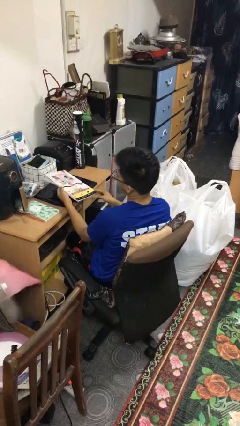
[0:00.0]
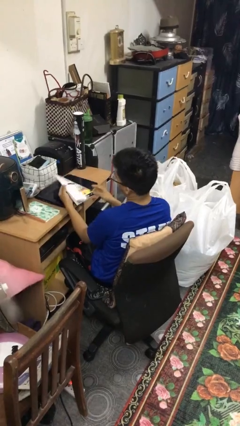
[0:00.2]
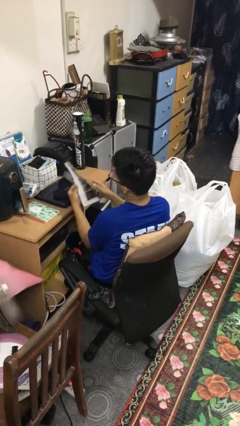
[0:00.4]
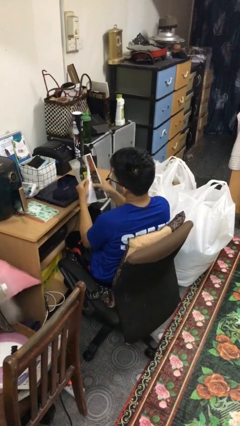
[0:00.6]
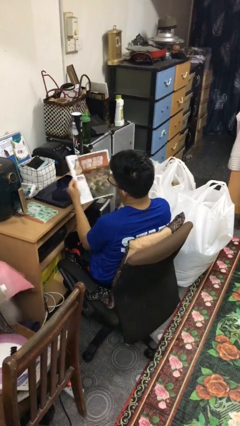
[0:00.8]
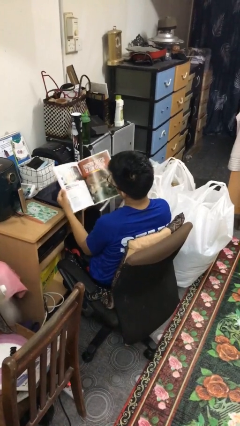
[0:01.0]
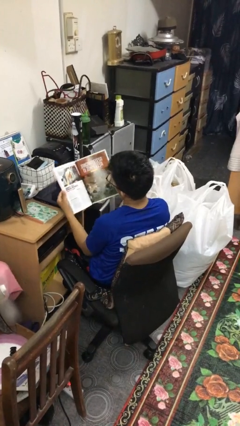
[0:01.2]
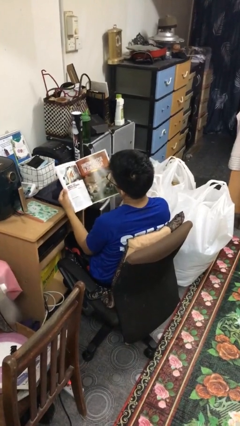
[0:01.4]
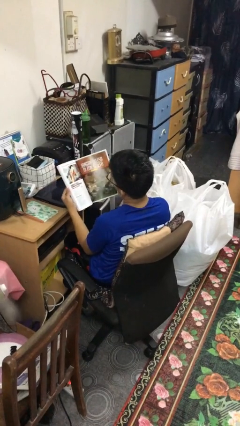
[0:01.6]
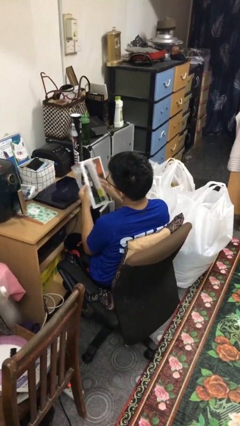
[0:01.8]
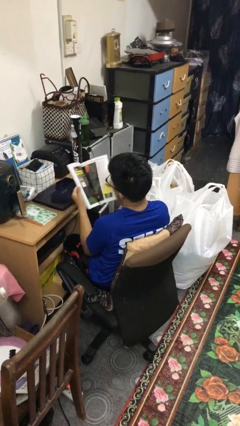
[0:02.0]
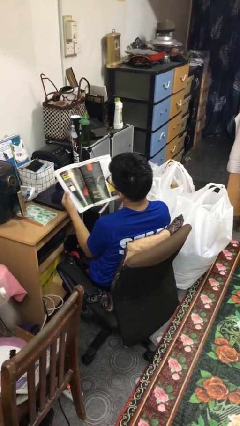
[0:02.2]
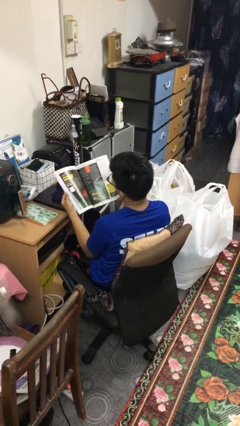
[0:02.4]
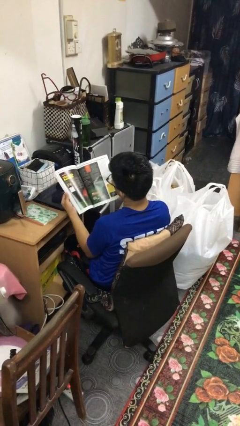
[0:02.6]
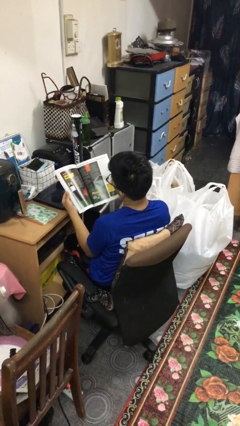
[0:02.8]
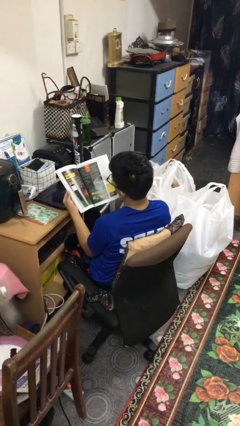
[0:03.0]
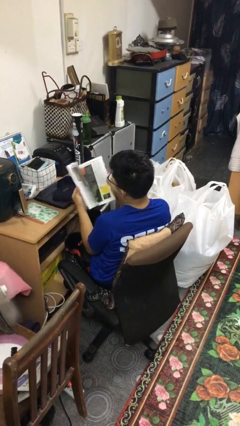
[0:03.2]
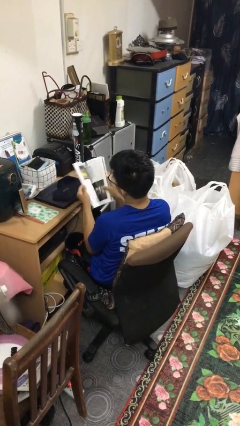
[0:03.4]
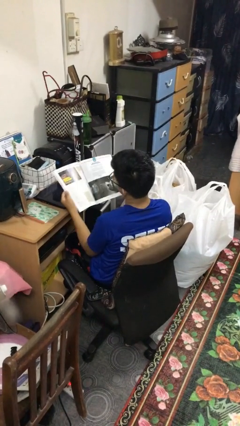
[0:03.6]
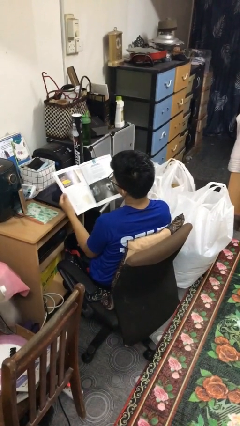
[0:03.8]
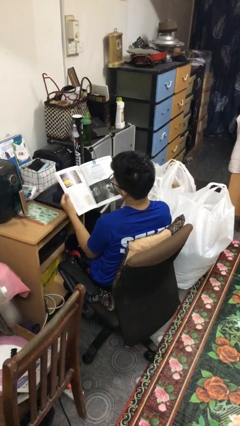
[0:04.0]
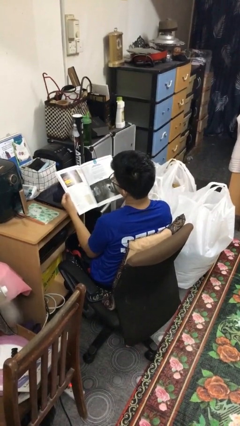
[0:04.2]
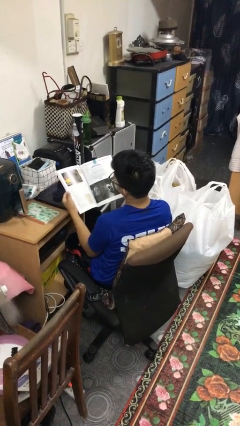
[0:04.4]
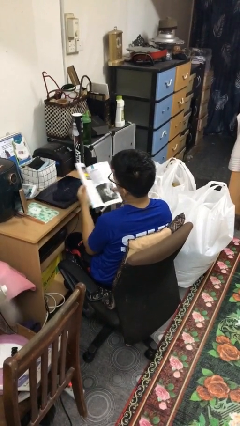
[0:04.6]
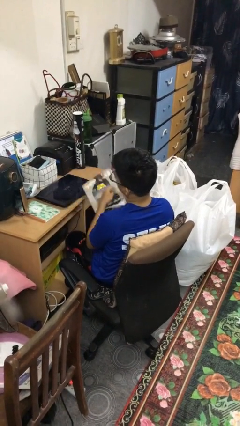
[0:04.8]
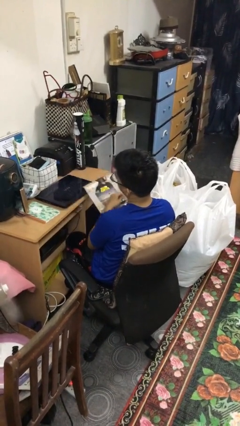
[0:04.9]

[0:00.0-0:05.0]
person reads magazine

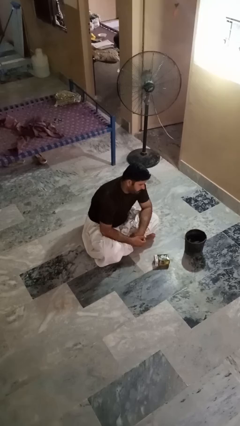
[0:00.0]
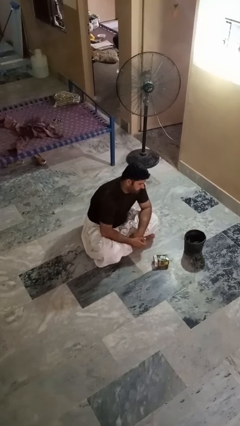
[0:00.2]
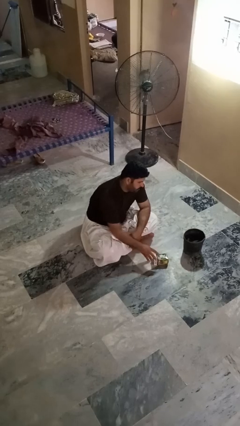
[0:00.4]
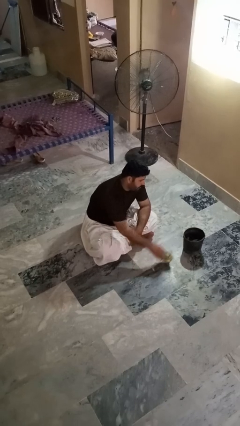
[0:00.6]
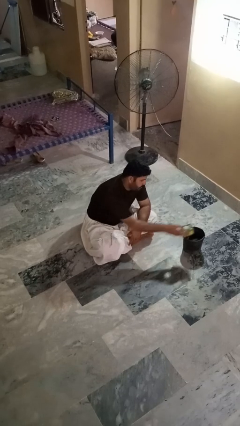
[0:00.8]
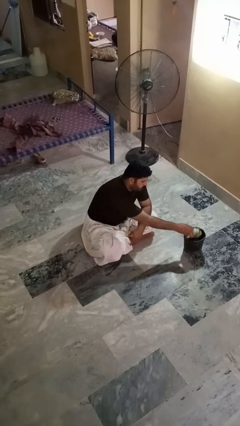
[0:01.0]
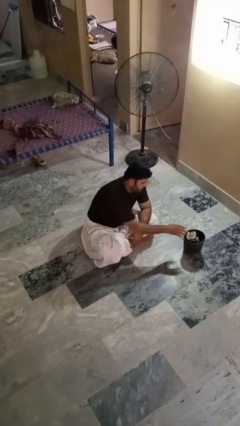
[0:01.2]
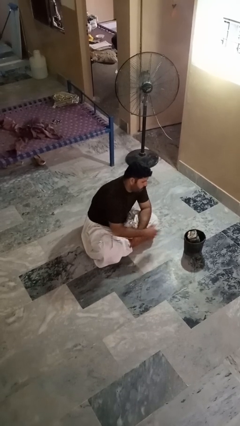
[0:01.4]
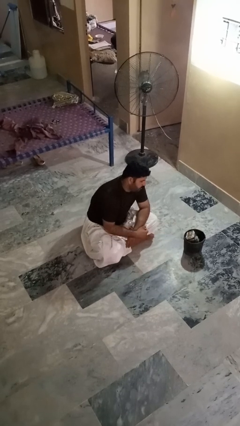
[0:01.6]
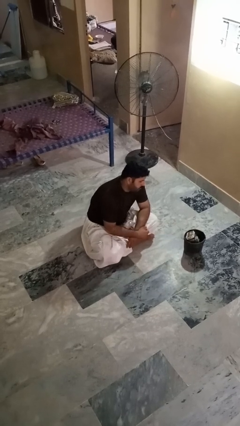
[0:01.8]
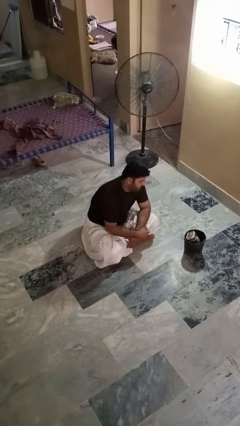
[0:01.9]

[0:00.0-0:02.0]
person puts object into basket

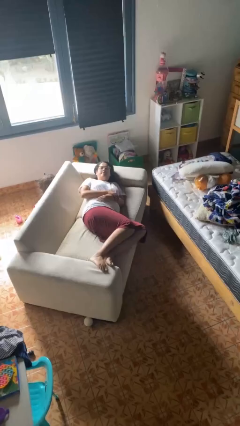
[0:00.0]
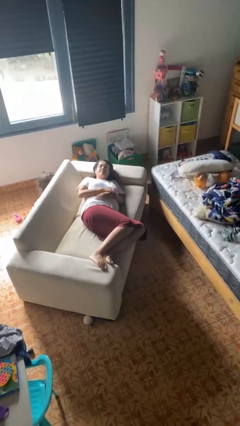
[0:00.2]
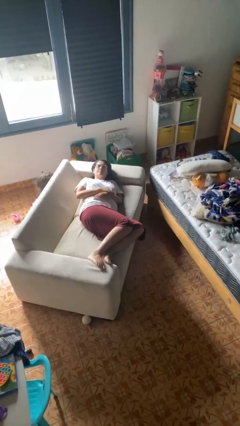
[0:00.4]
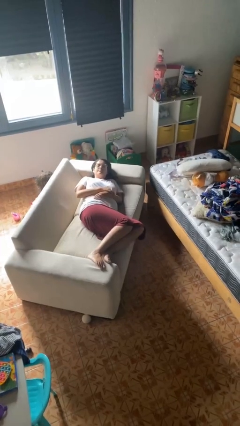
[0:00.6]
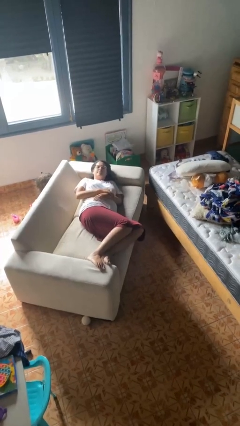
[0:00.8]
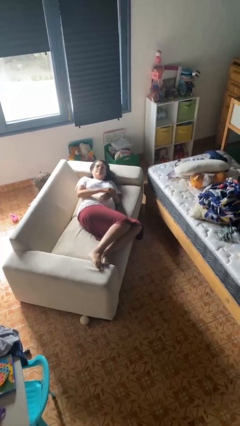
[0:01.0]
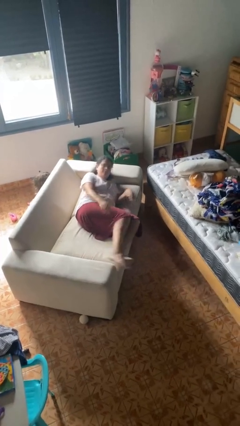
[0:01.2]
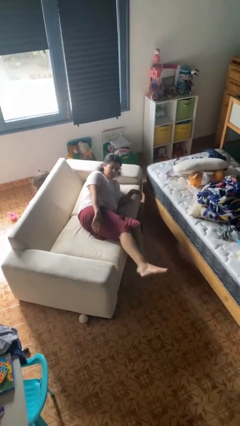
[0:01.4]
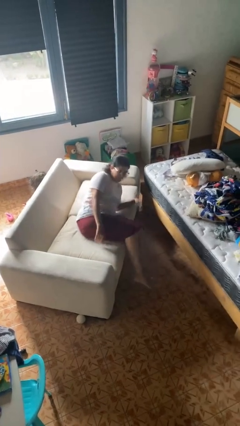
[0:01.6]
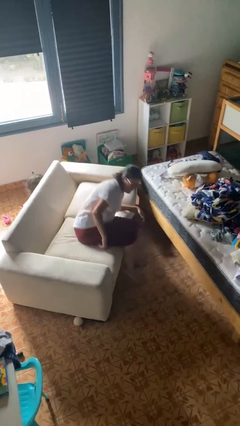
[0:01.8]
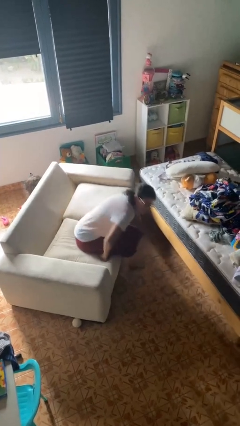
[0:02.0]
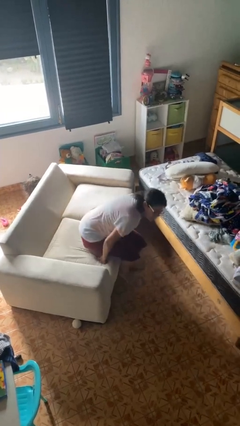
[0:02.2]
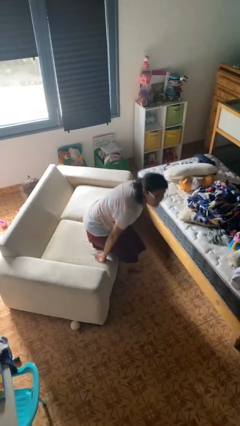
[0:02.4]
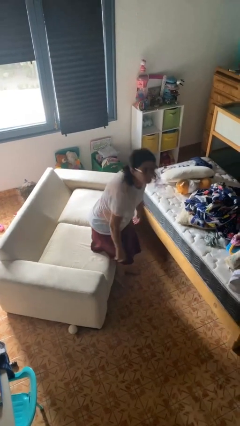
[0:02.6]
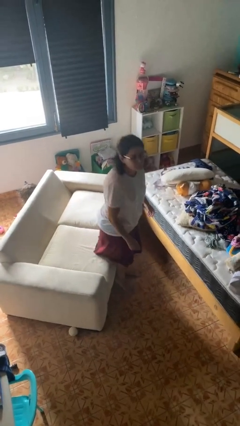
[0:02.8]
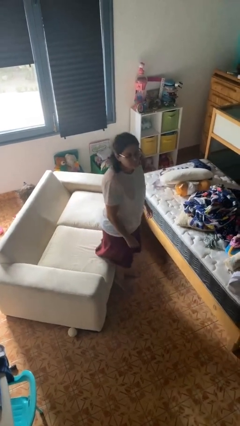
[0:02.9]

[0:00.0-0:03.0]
person stands up

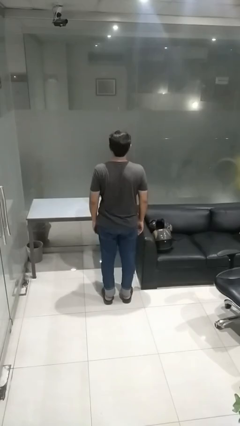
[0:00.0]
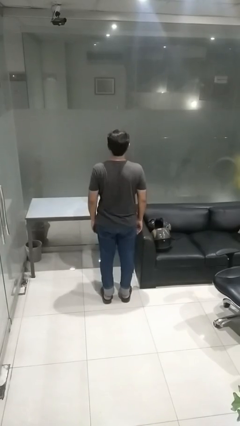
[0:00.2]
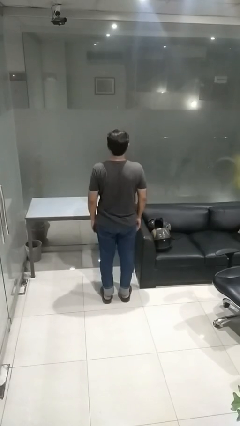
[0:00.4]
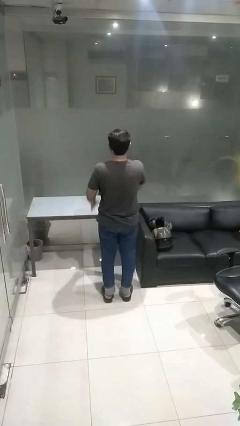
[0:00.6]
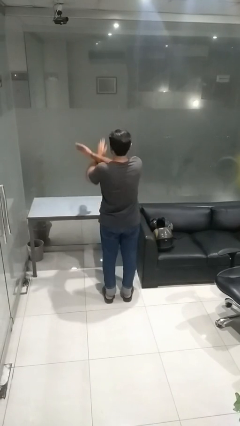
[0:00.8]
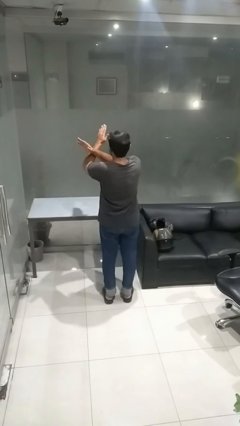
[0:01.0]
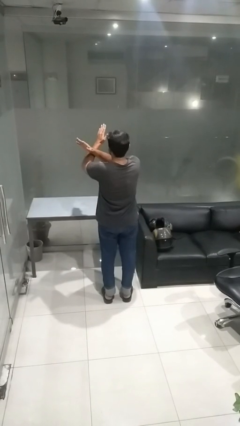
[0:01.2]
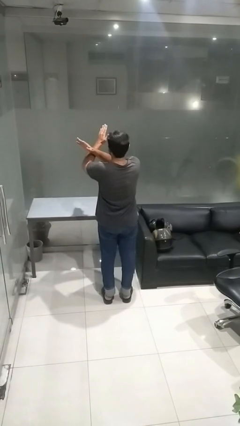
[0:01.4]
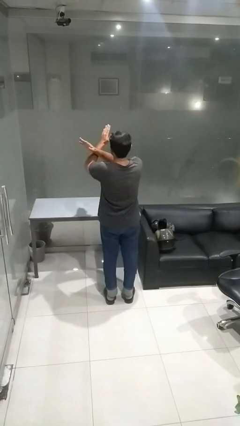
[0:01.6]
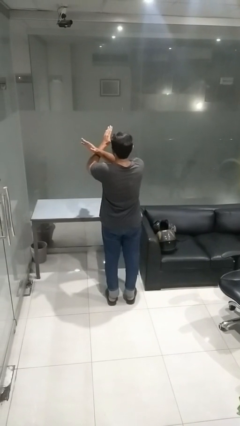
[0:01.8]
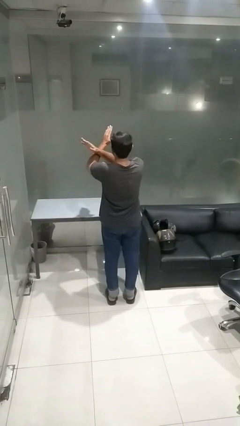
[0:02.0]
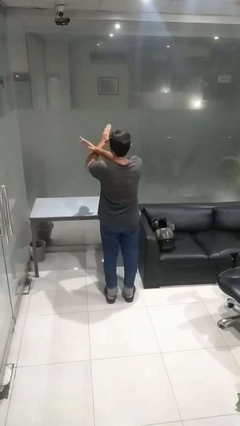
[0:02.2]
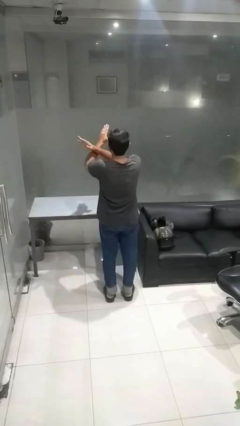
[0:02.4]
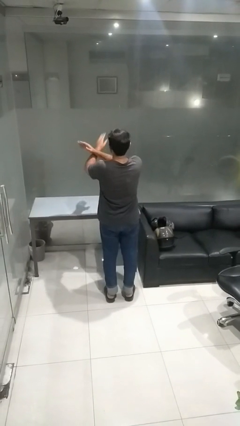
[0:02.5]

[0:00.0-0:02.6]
person gestures arms x

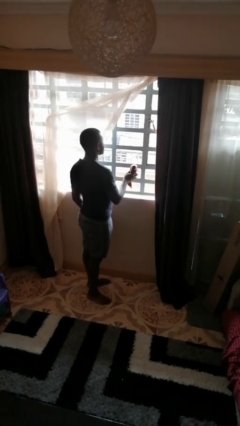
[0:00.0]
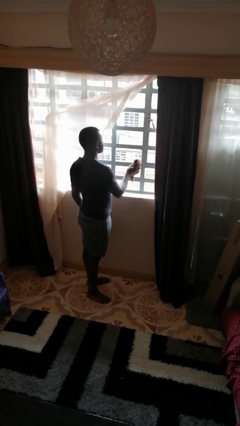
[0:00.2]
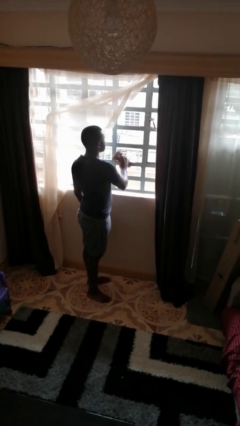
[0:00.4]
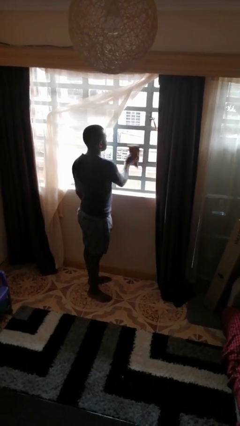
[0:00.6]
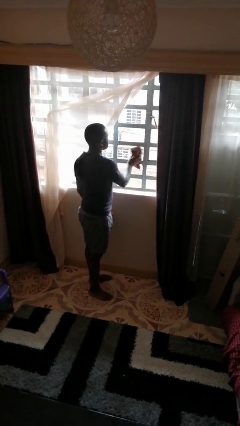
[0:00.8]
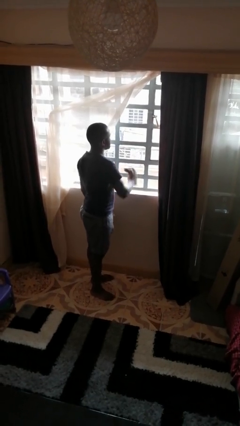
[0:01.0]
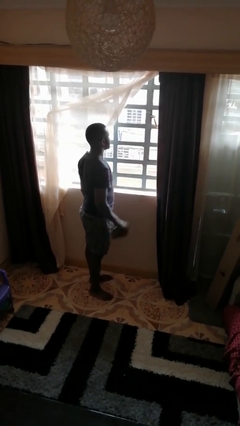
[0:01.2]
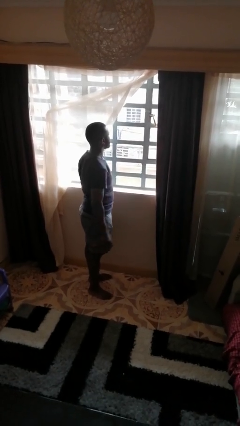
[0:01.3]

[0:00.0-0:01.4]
person washes window

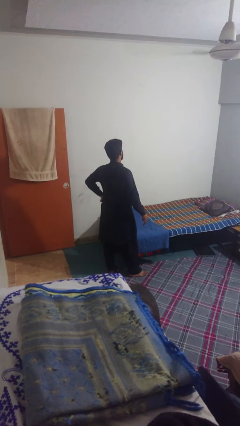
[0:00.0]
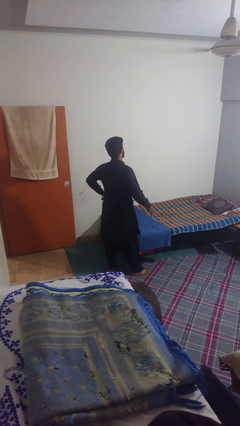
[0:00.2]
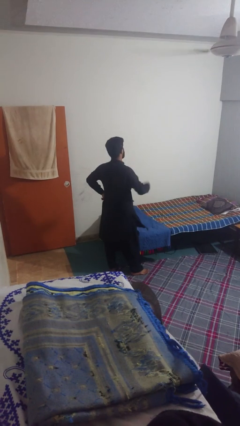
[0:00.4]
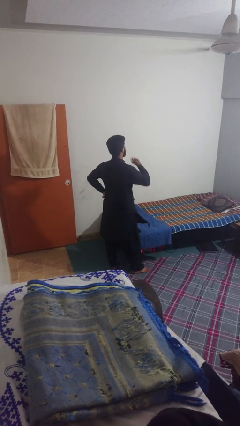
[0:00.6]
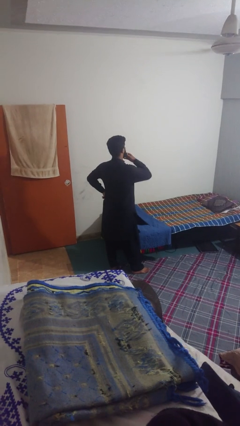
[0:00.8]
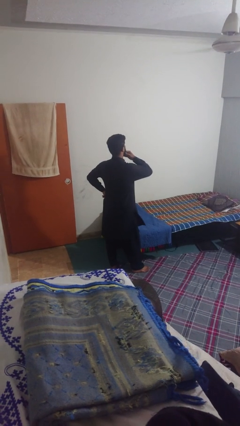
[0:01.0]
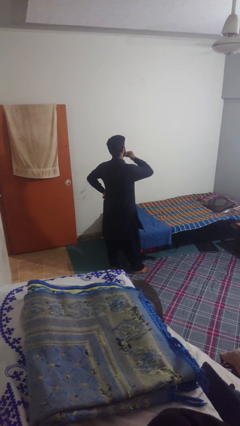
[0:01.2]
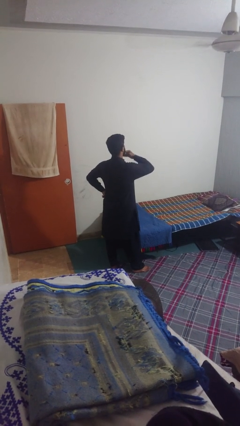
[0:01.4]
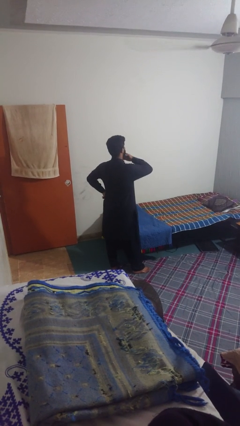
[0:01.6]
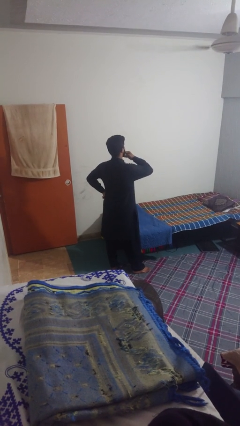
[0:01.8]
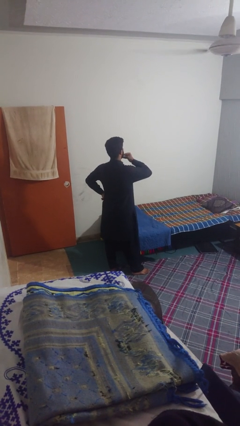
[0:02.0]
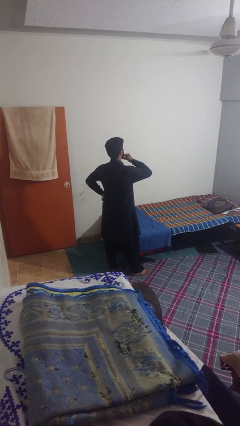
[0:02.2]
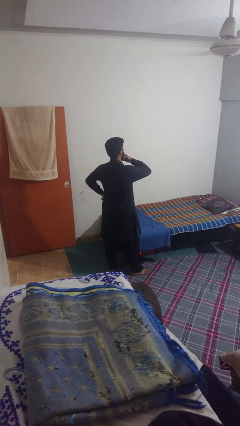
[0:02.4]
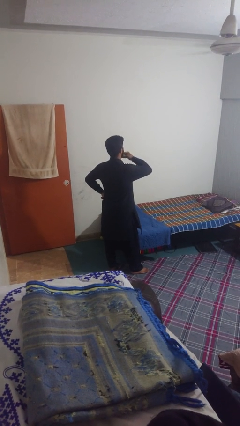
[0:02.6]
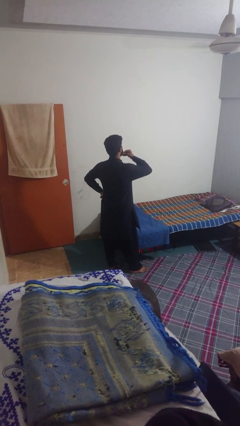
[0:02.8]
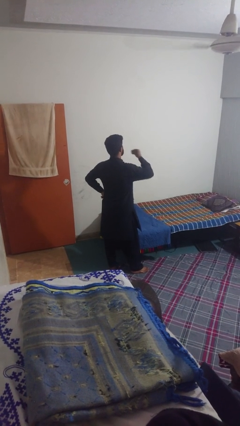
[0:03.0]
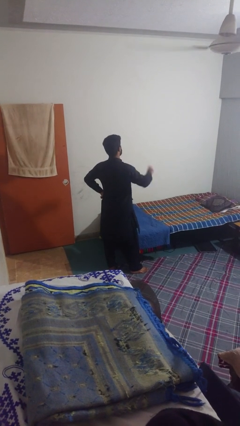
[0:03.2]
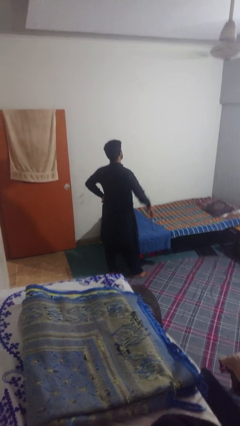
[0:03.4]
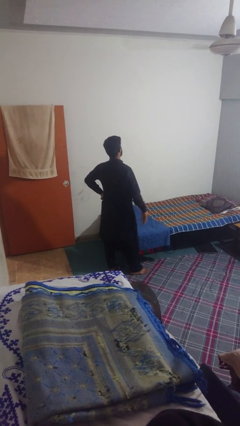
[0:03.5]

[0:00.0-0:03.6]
person strokes chin
